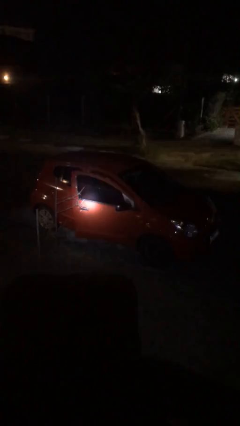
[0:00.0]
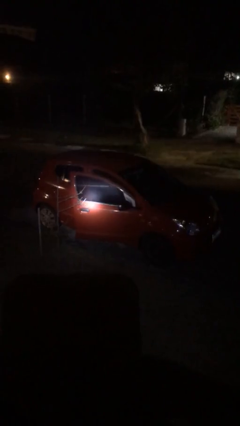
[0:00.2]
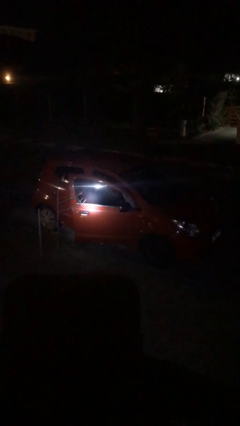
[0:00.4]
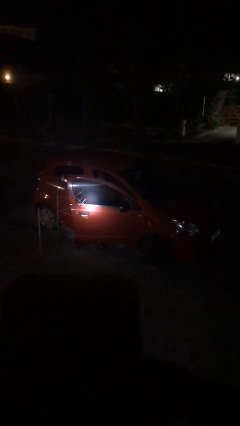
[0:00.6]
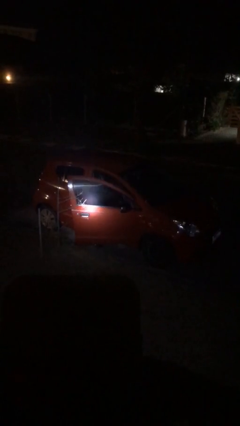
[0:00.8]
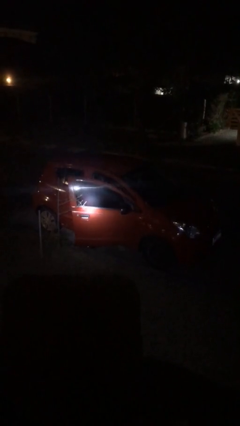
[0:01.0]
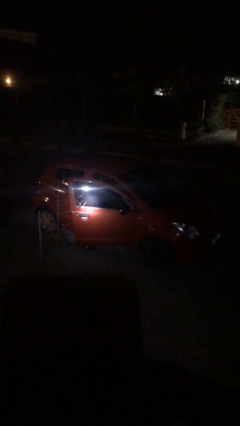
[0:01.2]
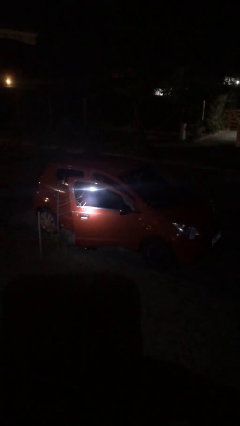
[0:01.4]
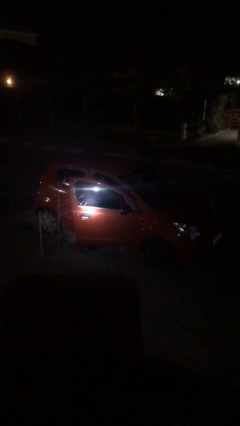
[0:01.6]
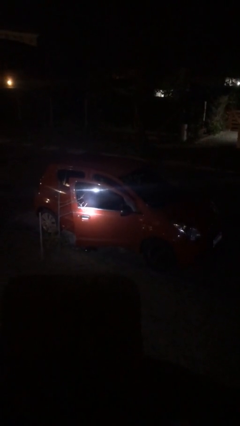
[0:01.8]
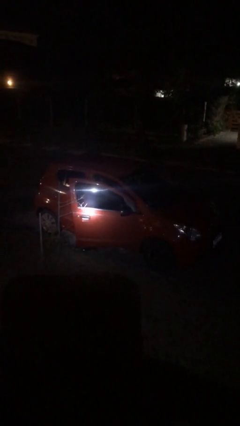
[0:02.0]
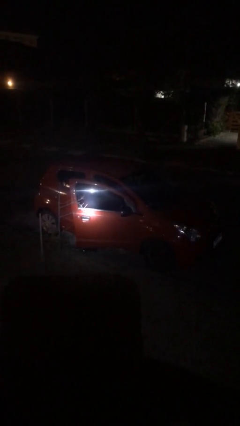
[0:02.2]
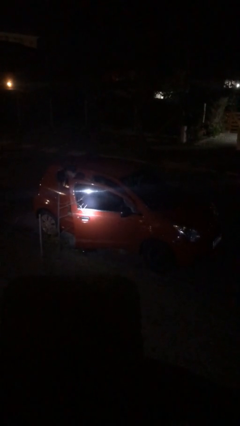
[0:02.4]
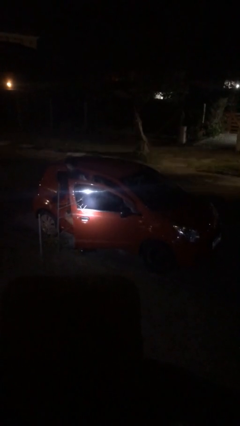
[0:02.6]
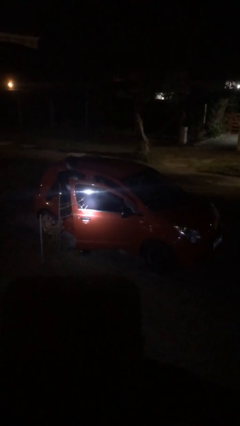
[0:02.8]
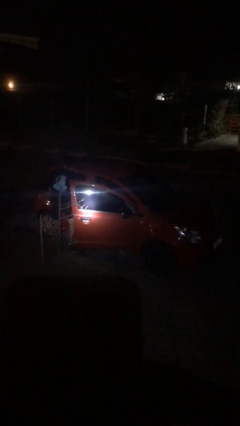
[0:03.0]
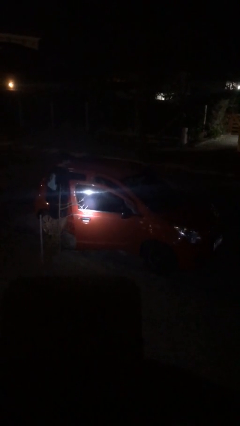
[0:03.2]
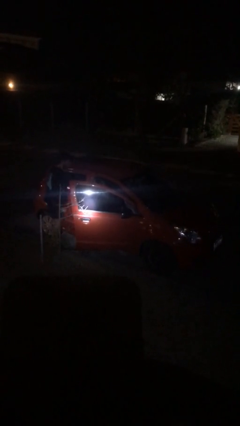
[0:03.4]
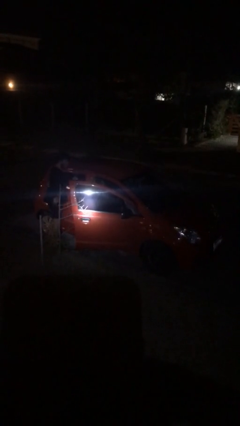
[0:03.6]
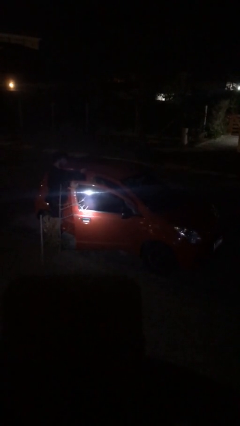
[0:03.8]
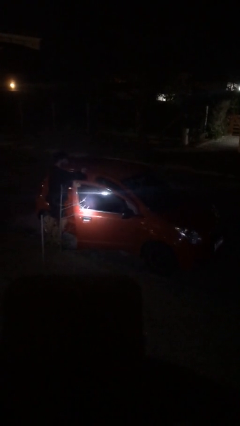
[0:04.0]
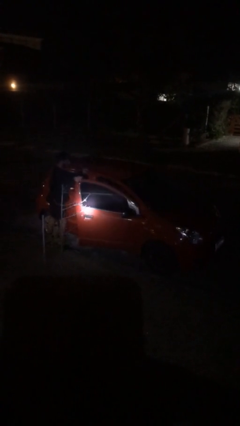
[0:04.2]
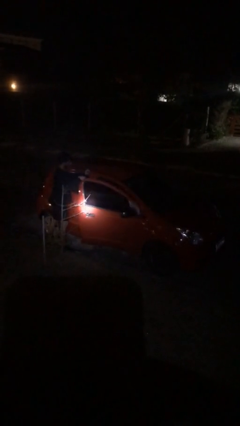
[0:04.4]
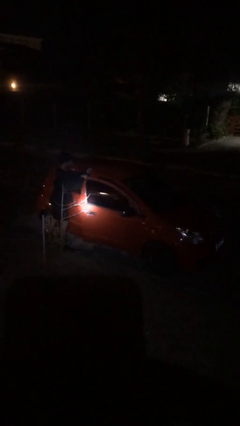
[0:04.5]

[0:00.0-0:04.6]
car drops off person

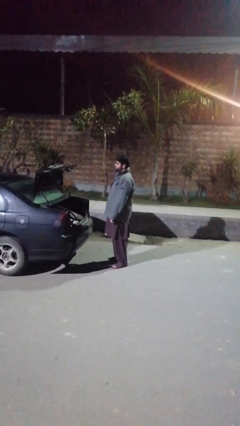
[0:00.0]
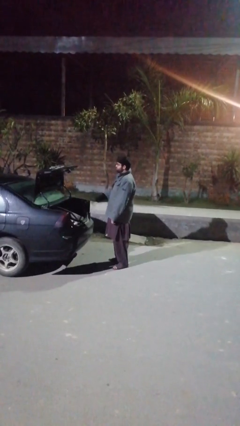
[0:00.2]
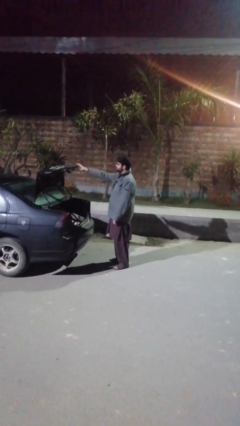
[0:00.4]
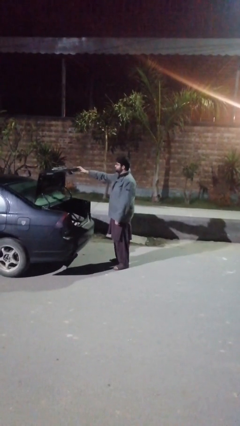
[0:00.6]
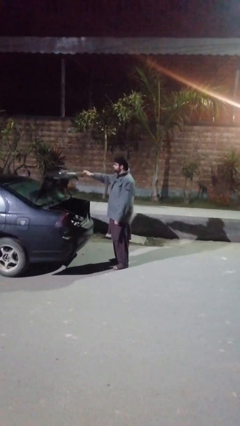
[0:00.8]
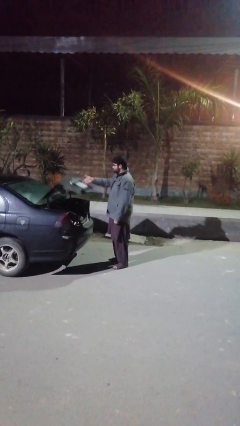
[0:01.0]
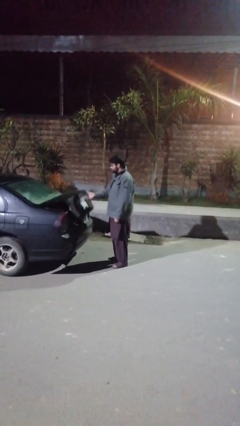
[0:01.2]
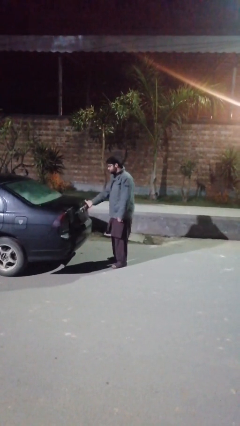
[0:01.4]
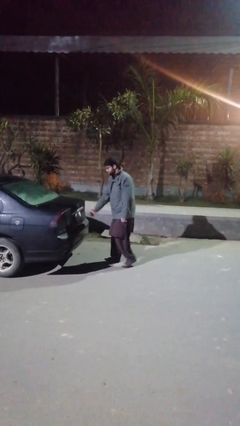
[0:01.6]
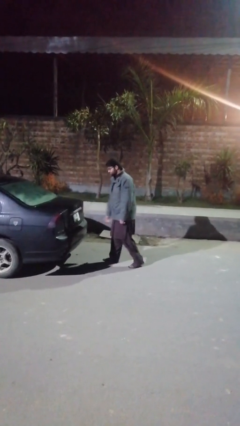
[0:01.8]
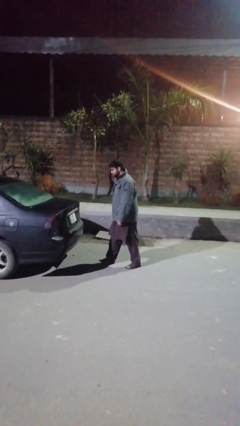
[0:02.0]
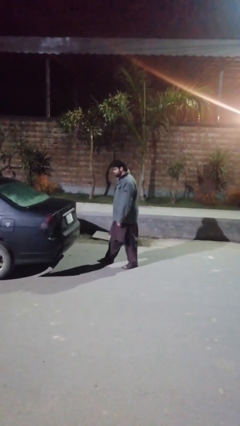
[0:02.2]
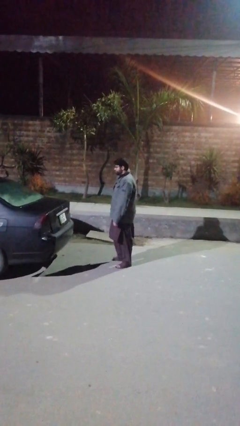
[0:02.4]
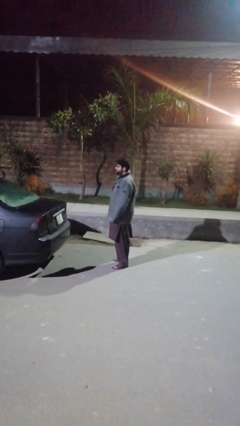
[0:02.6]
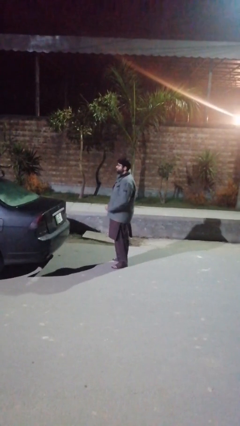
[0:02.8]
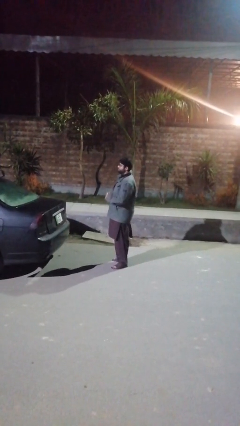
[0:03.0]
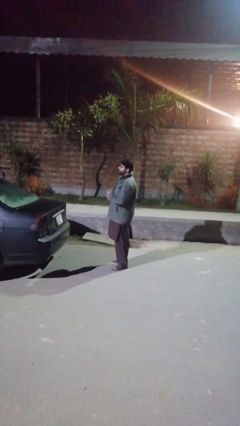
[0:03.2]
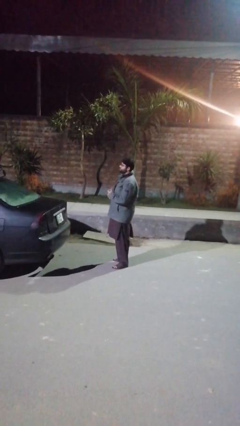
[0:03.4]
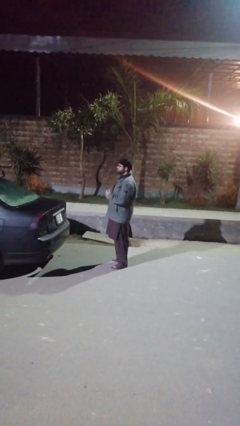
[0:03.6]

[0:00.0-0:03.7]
person opens car trunk

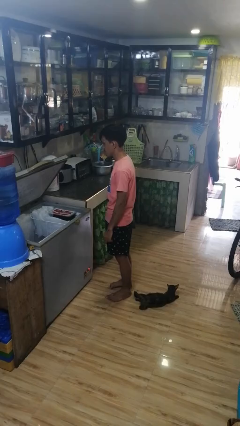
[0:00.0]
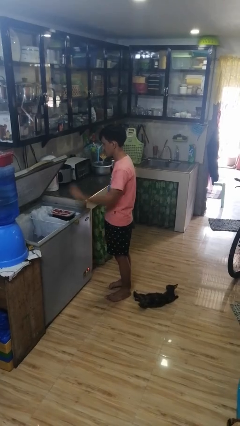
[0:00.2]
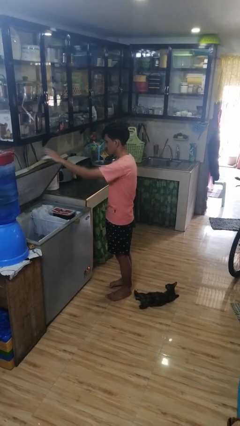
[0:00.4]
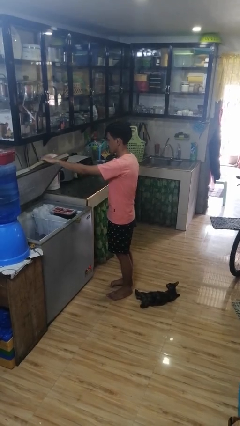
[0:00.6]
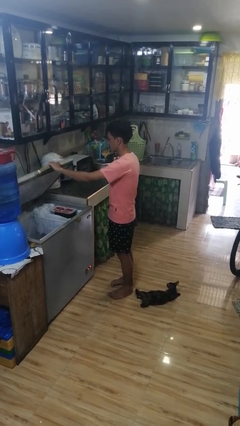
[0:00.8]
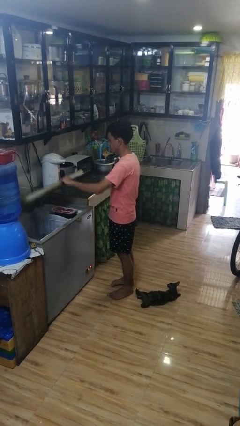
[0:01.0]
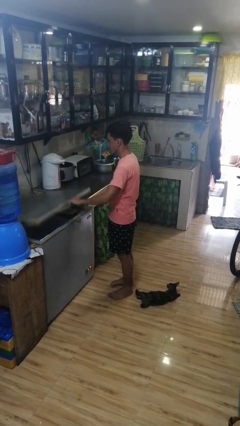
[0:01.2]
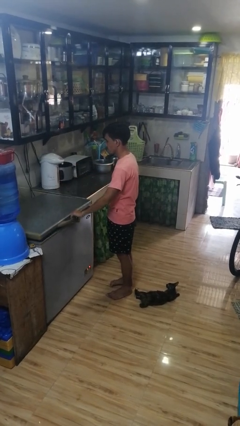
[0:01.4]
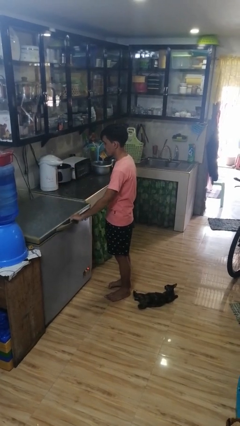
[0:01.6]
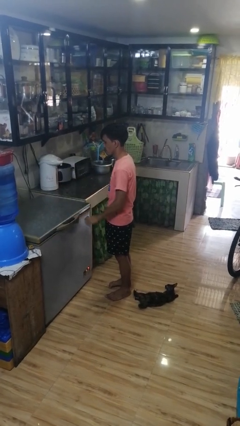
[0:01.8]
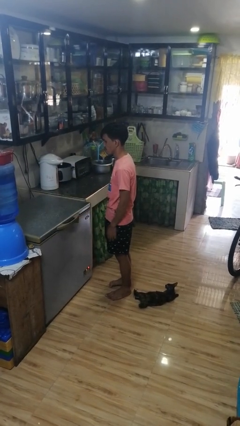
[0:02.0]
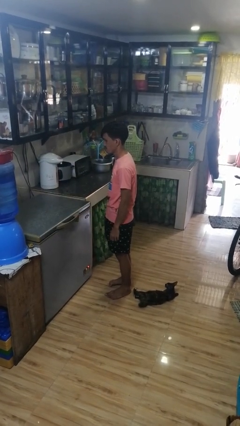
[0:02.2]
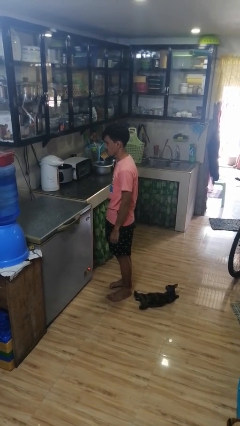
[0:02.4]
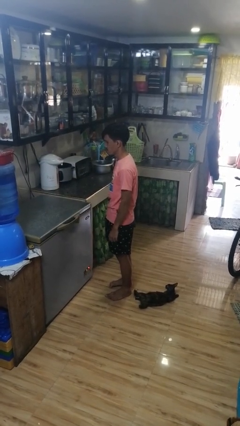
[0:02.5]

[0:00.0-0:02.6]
person closes refrigerator

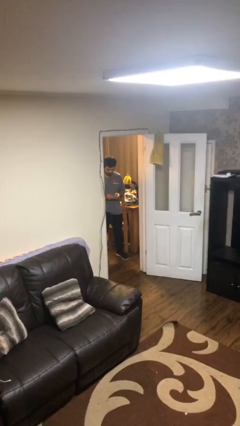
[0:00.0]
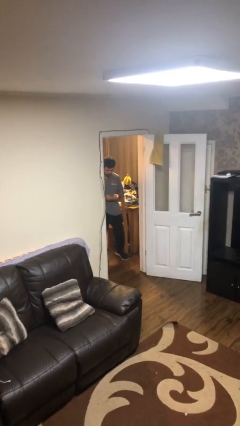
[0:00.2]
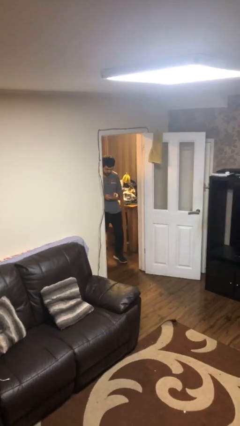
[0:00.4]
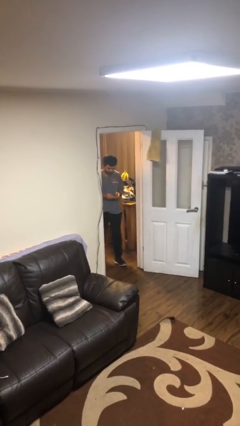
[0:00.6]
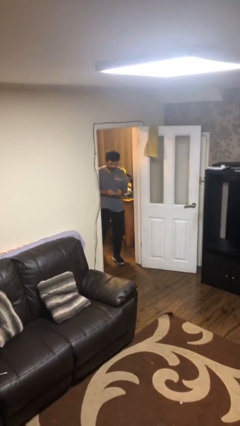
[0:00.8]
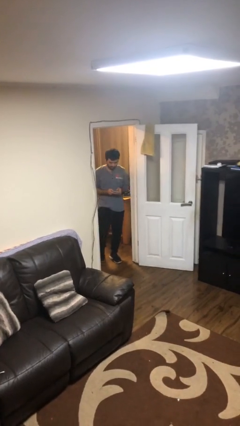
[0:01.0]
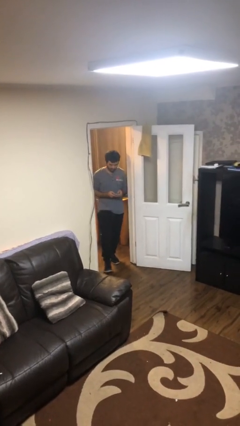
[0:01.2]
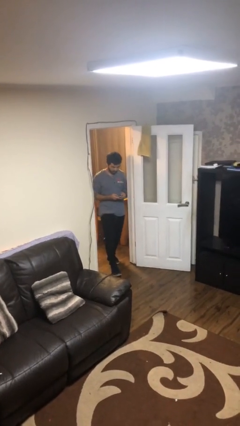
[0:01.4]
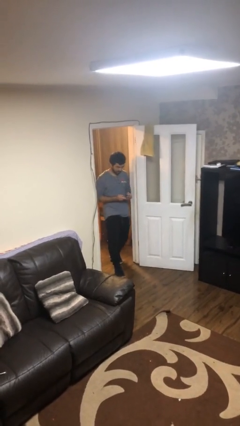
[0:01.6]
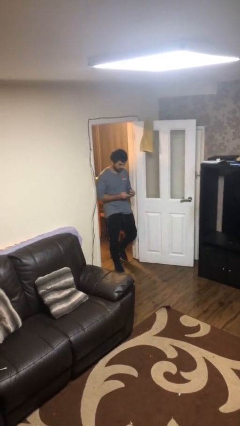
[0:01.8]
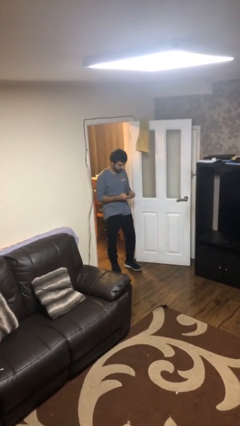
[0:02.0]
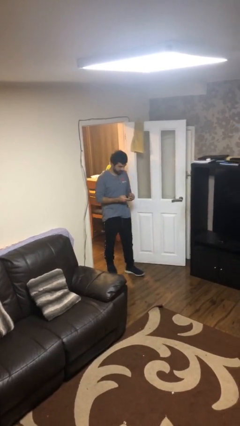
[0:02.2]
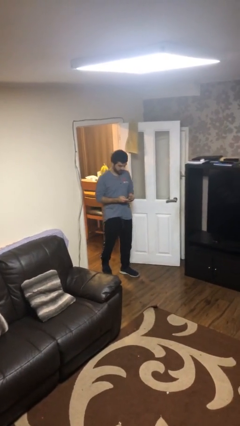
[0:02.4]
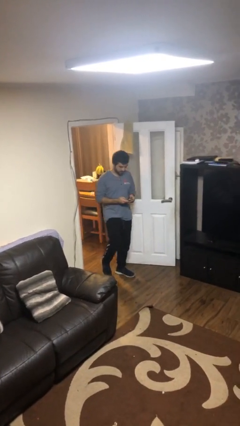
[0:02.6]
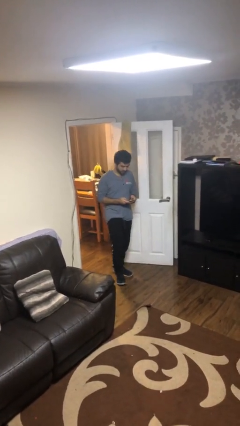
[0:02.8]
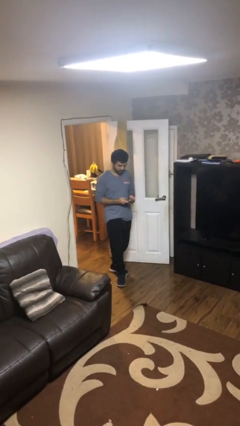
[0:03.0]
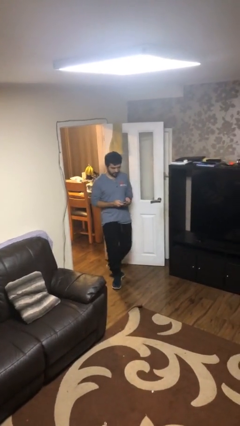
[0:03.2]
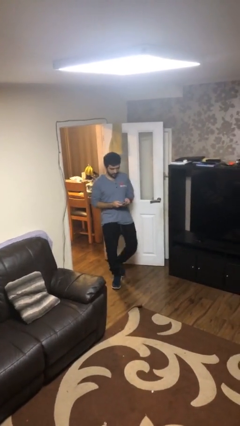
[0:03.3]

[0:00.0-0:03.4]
person enters scene through structure

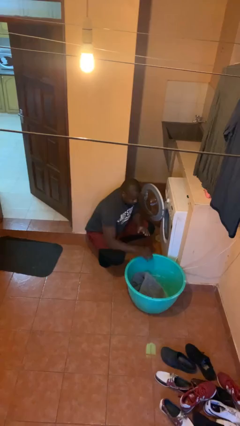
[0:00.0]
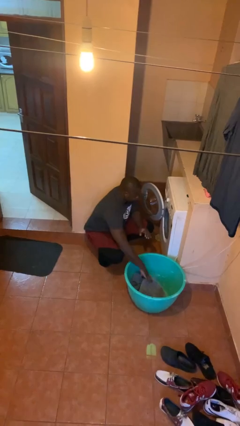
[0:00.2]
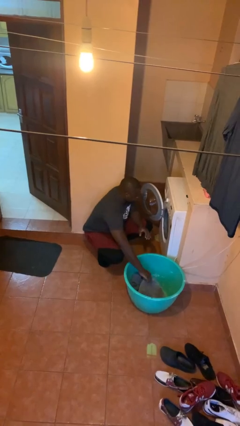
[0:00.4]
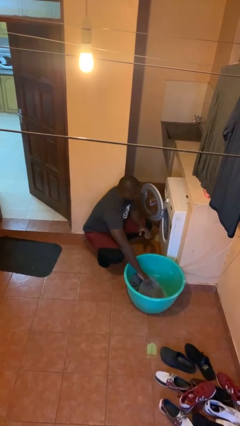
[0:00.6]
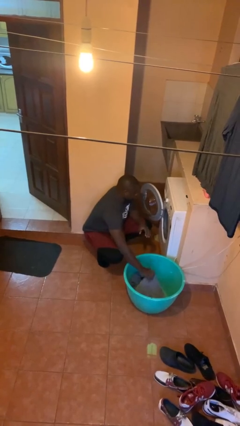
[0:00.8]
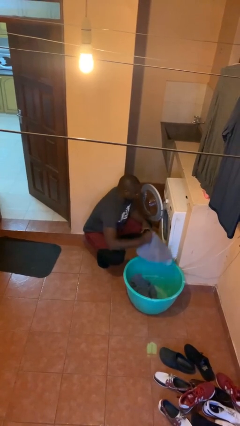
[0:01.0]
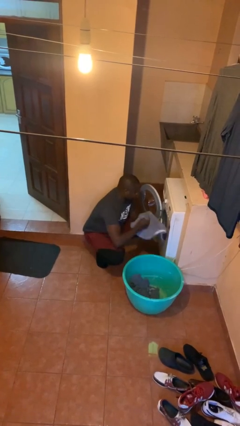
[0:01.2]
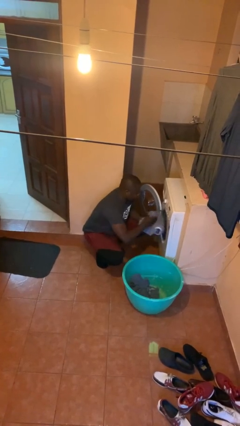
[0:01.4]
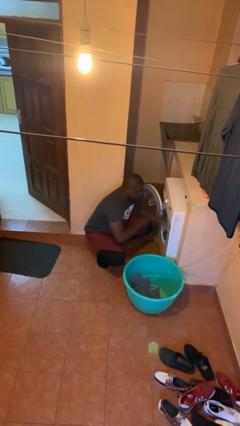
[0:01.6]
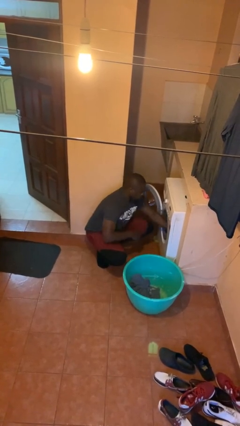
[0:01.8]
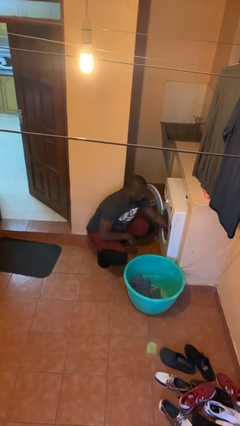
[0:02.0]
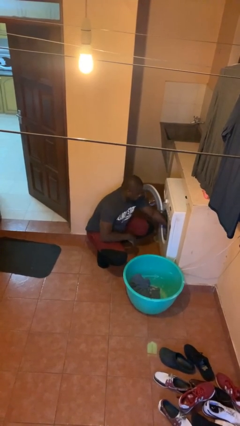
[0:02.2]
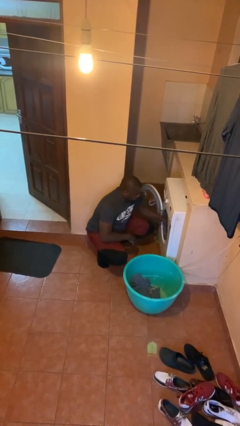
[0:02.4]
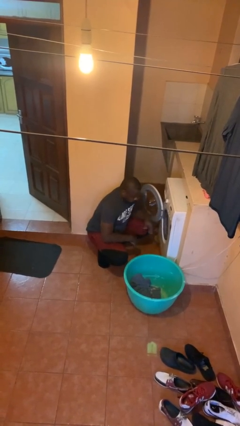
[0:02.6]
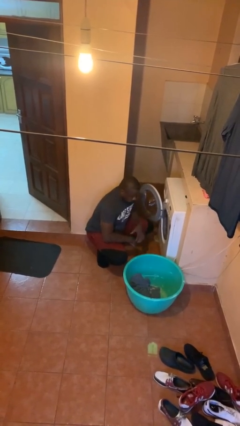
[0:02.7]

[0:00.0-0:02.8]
person loads clotheswasher

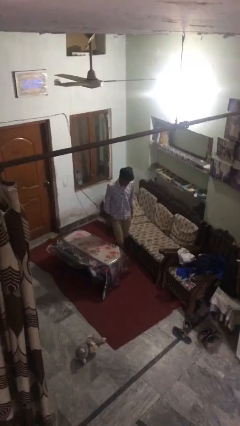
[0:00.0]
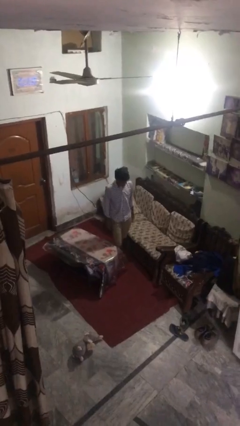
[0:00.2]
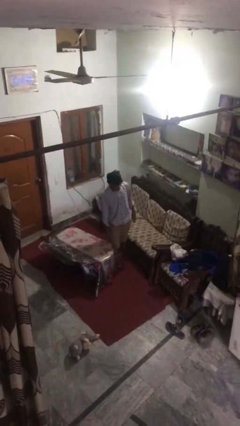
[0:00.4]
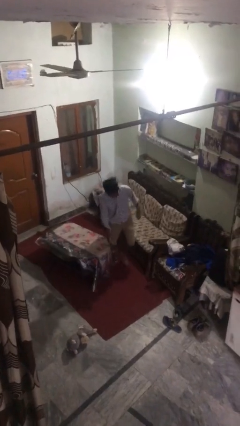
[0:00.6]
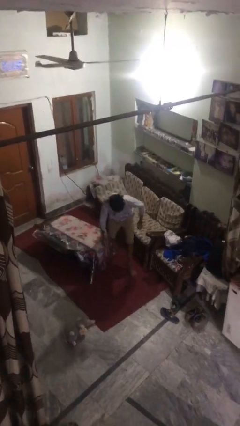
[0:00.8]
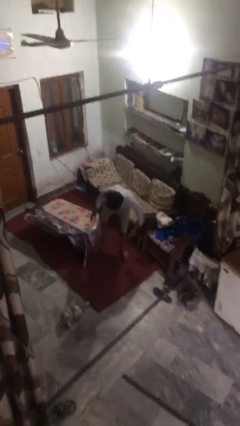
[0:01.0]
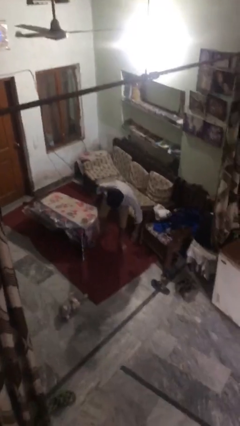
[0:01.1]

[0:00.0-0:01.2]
person trips on object on floor
